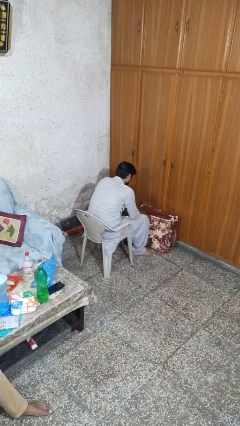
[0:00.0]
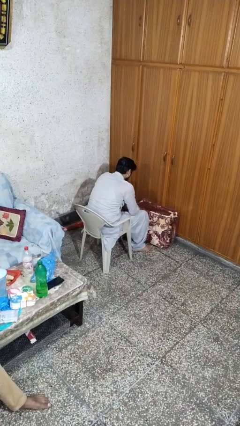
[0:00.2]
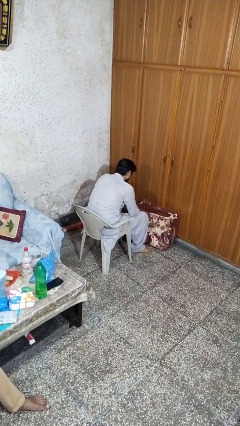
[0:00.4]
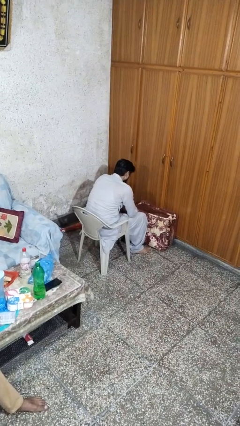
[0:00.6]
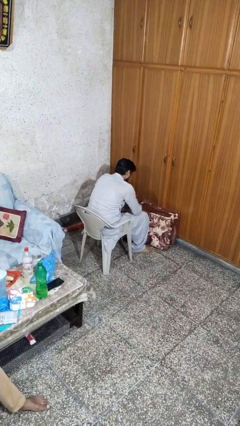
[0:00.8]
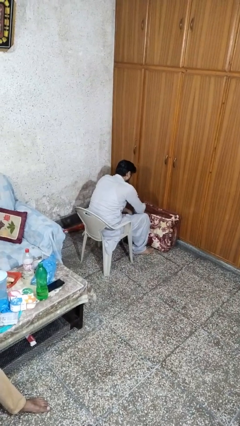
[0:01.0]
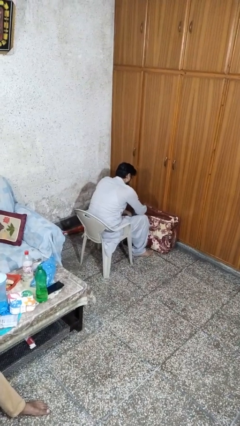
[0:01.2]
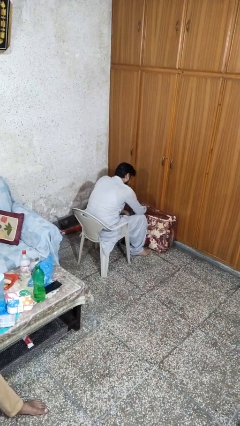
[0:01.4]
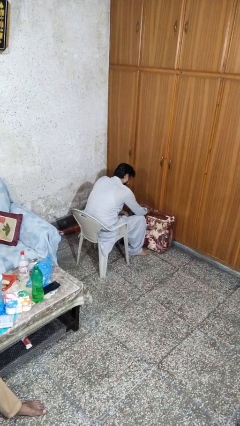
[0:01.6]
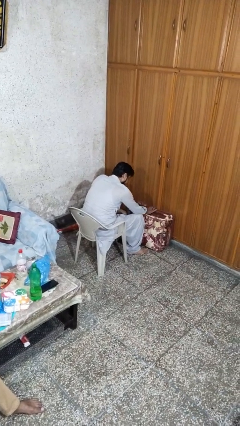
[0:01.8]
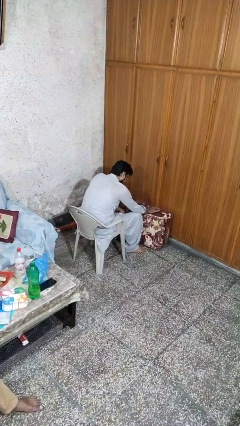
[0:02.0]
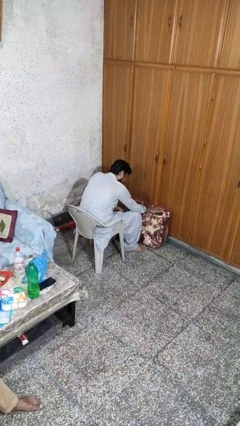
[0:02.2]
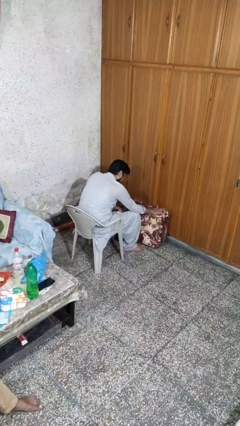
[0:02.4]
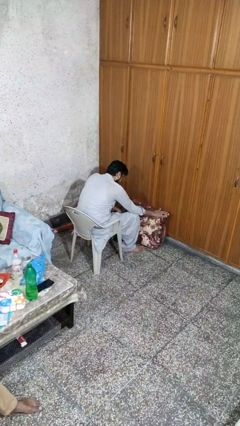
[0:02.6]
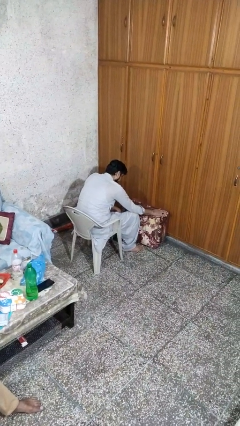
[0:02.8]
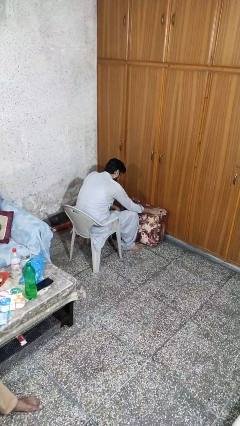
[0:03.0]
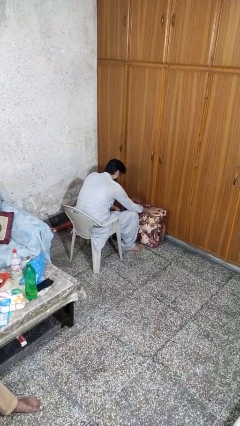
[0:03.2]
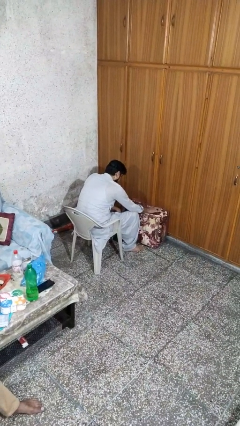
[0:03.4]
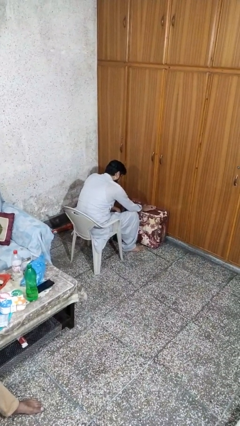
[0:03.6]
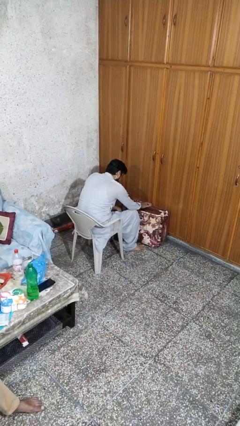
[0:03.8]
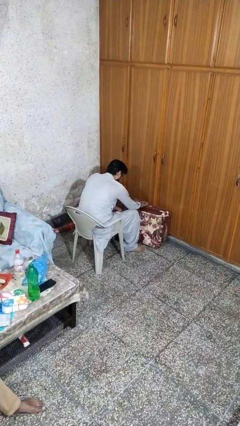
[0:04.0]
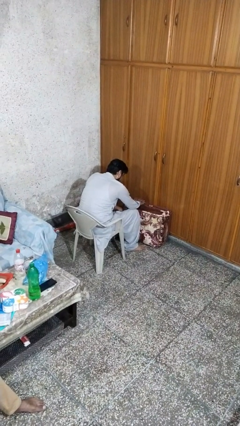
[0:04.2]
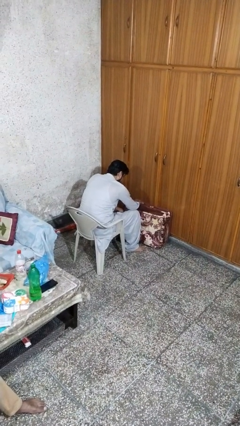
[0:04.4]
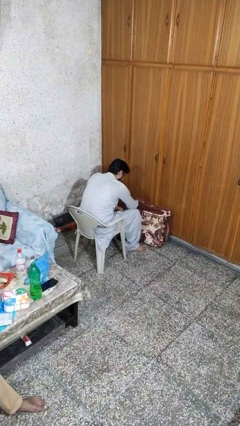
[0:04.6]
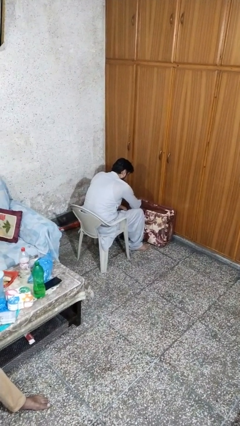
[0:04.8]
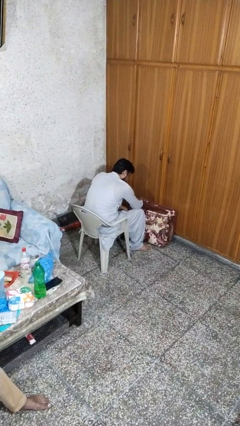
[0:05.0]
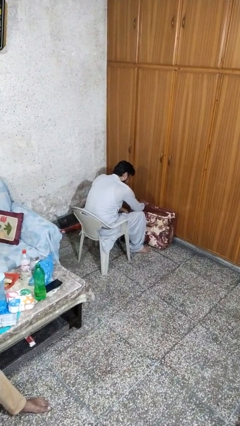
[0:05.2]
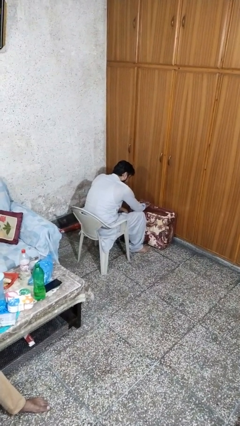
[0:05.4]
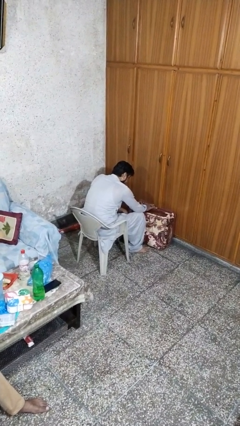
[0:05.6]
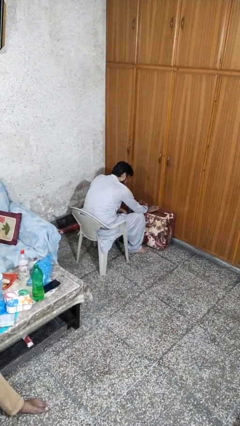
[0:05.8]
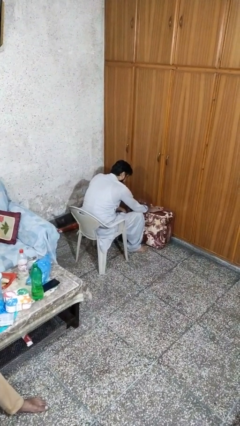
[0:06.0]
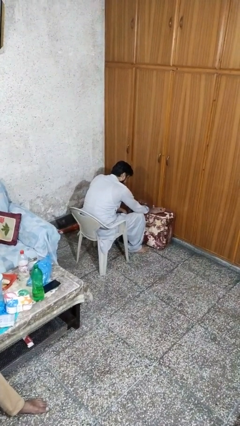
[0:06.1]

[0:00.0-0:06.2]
person waves hand over object

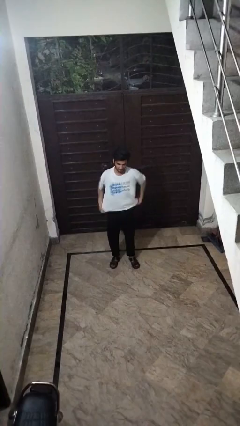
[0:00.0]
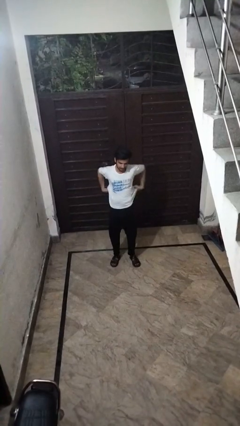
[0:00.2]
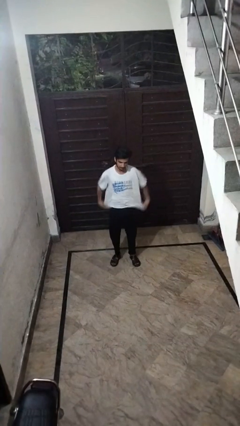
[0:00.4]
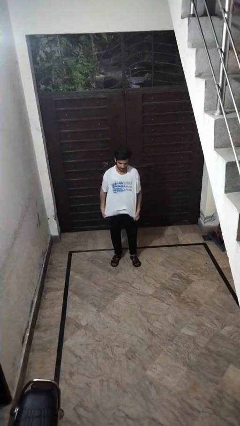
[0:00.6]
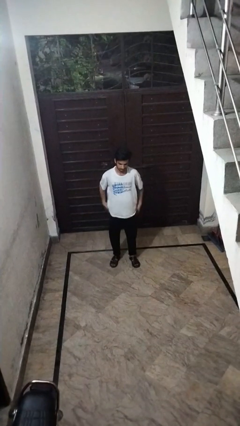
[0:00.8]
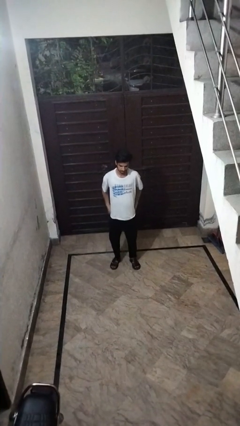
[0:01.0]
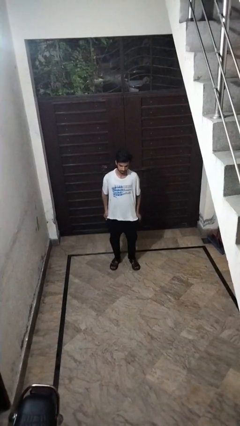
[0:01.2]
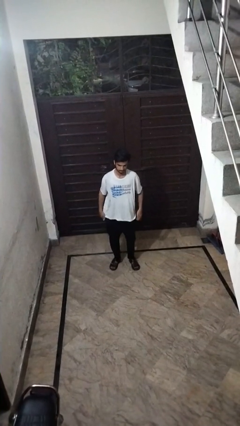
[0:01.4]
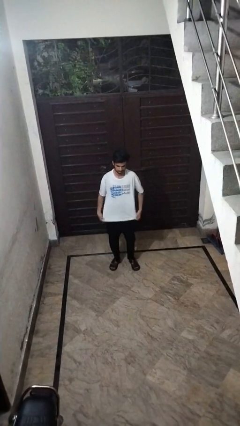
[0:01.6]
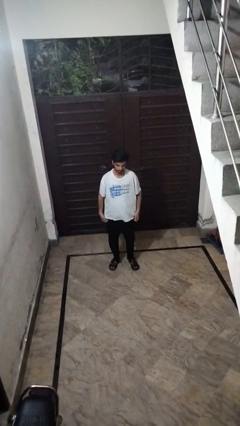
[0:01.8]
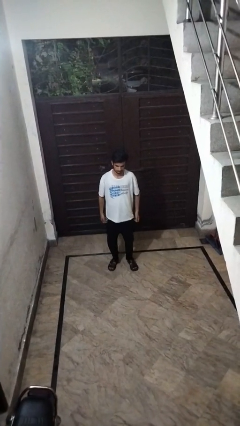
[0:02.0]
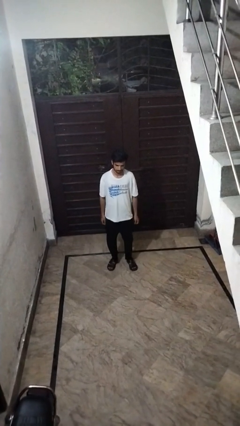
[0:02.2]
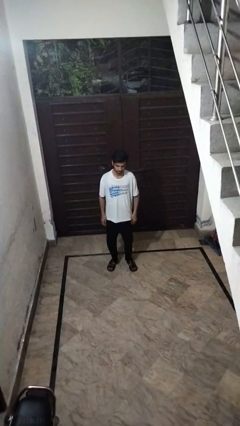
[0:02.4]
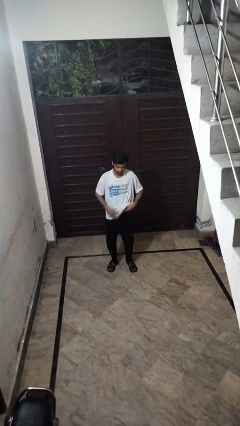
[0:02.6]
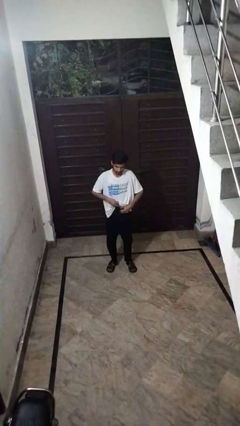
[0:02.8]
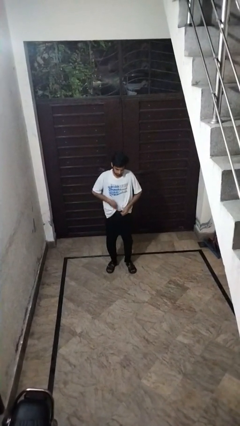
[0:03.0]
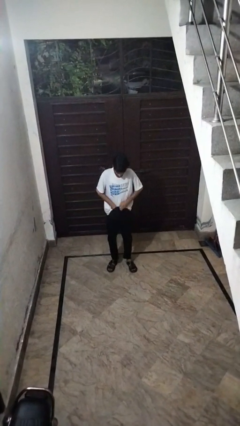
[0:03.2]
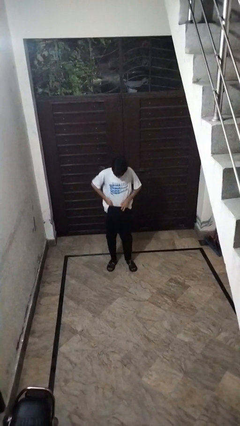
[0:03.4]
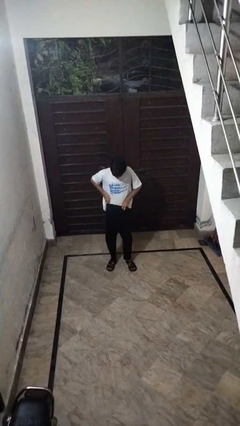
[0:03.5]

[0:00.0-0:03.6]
person opens facility door

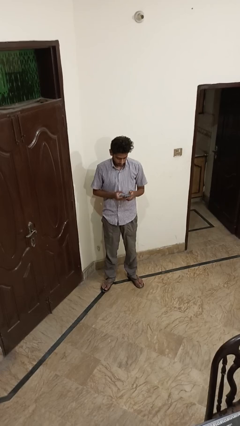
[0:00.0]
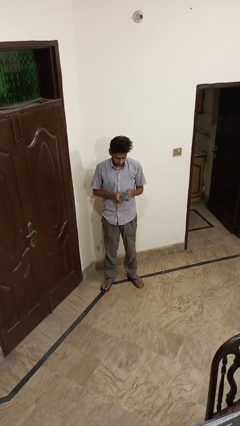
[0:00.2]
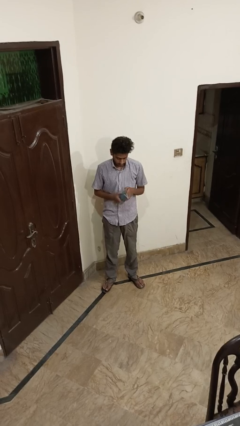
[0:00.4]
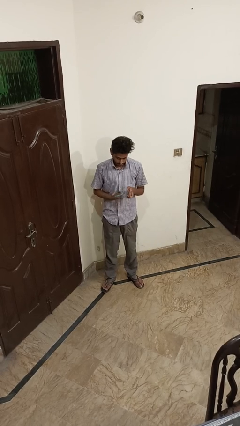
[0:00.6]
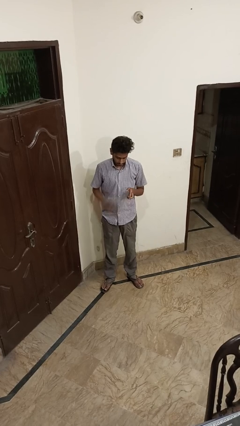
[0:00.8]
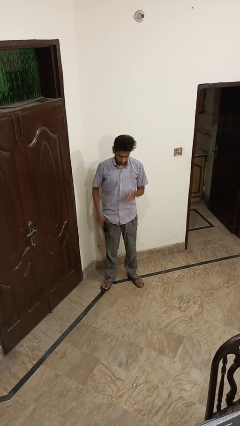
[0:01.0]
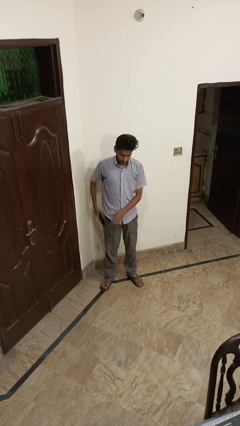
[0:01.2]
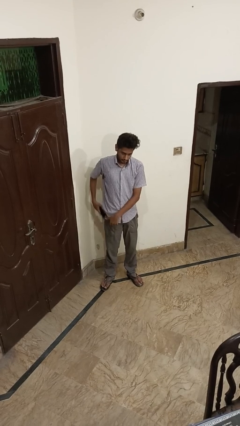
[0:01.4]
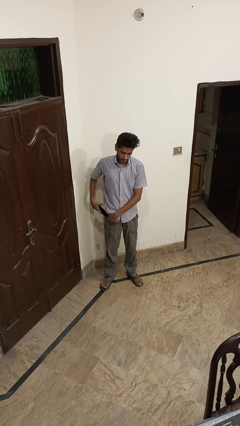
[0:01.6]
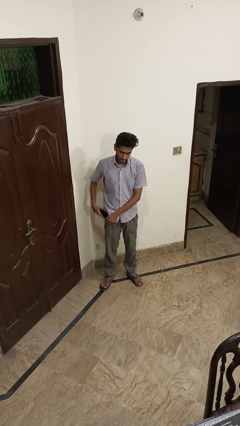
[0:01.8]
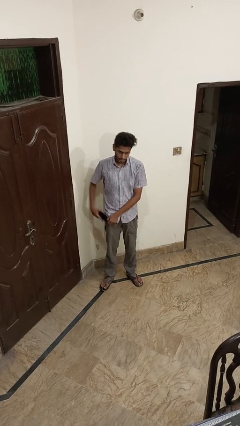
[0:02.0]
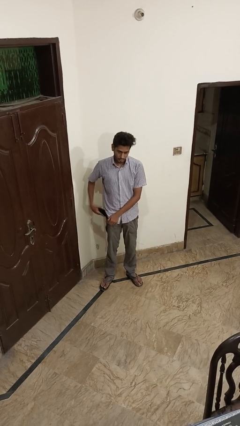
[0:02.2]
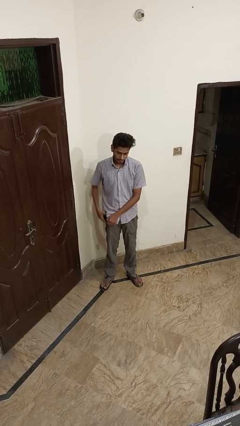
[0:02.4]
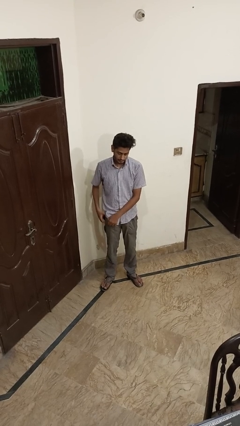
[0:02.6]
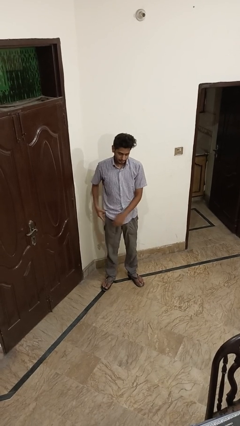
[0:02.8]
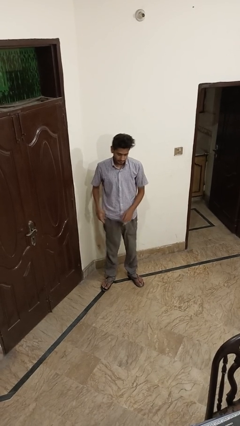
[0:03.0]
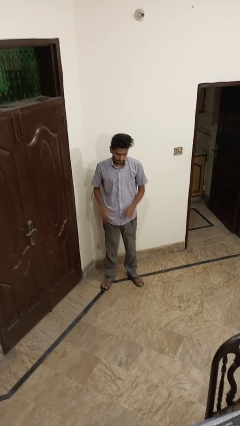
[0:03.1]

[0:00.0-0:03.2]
person puts phone into pocket

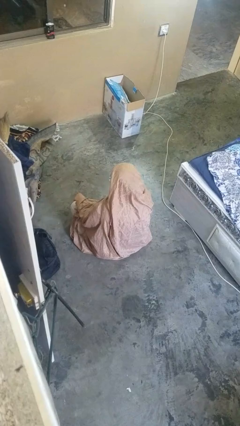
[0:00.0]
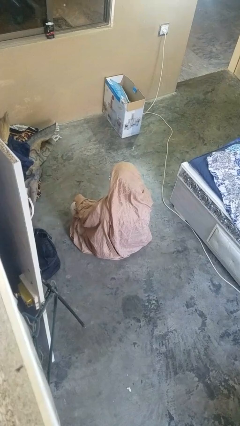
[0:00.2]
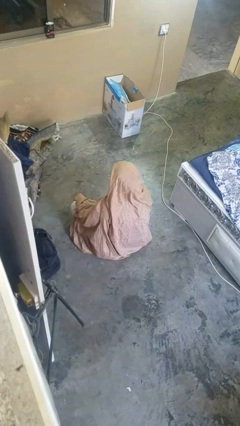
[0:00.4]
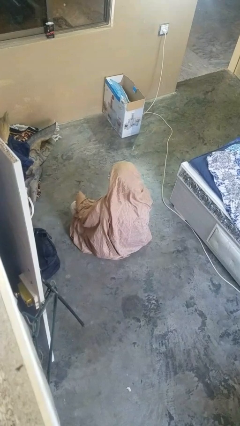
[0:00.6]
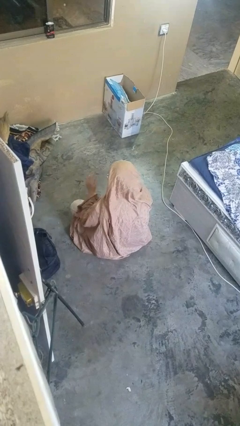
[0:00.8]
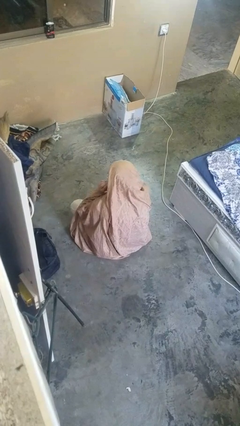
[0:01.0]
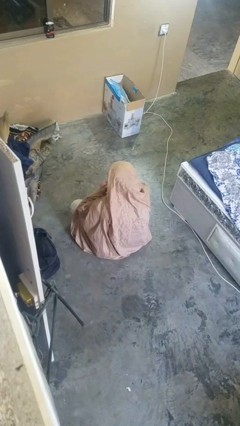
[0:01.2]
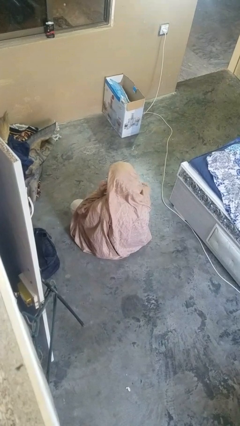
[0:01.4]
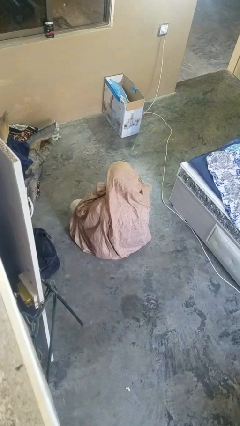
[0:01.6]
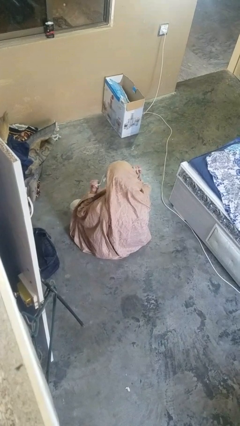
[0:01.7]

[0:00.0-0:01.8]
person takes off facemask

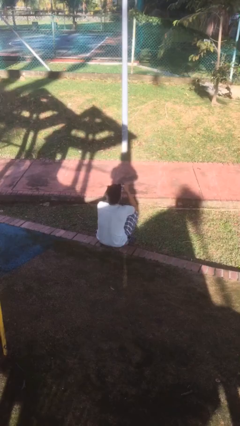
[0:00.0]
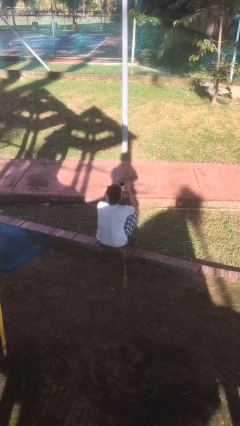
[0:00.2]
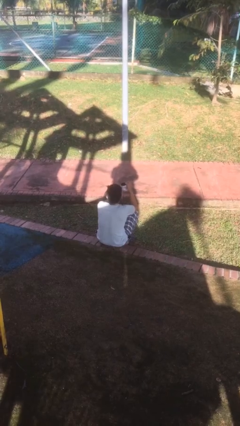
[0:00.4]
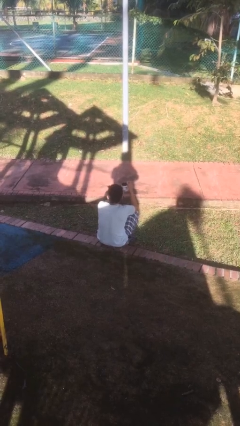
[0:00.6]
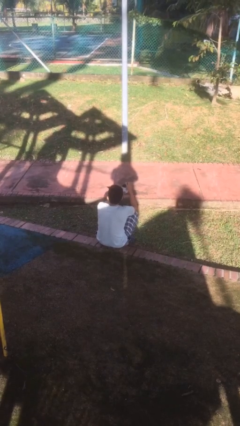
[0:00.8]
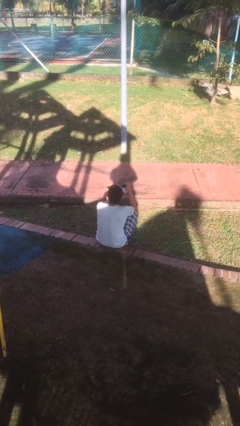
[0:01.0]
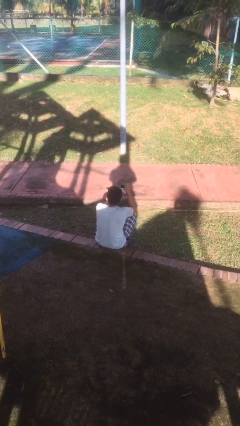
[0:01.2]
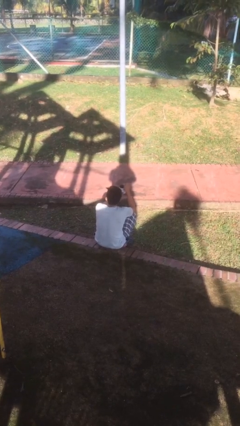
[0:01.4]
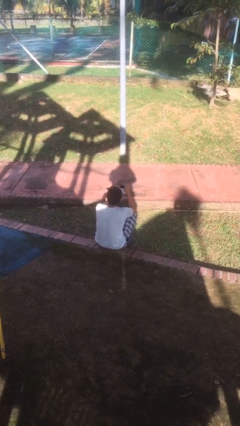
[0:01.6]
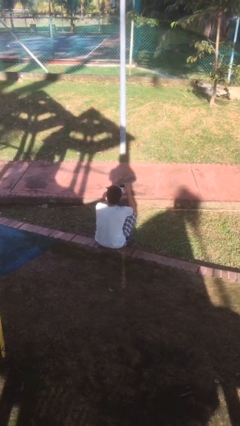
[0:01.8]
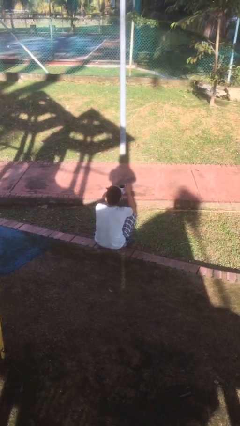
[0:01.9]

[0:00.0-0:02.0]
person stirs mug

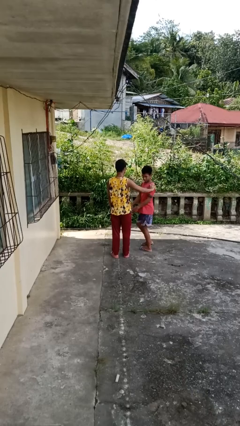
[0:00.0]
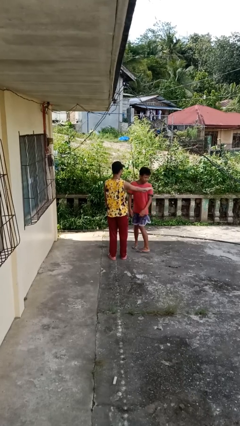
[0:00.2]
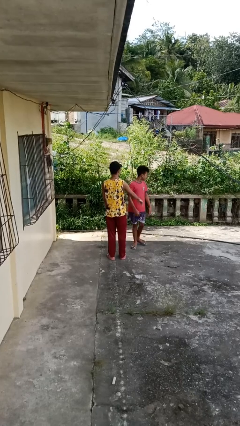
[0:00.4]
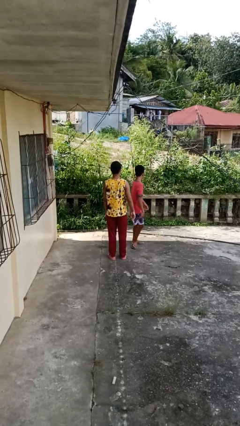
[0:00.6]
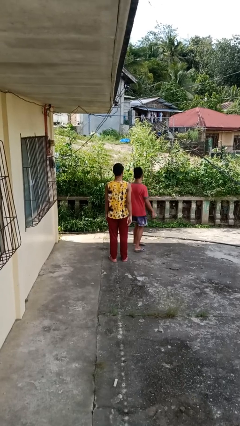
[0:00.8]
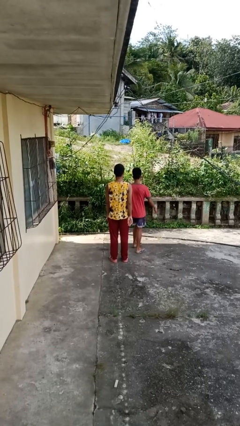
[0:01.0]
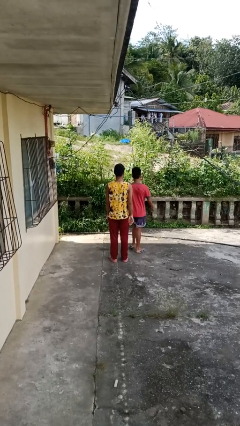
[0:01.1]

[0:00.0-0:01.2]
person spins person around
